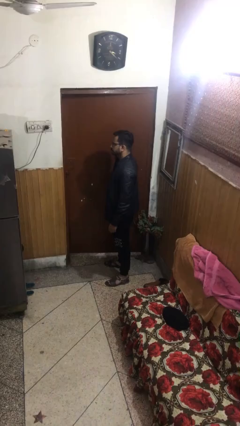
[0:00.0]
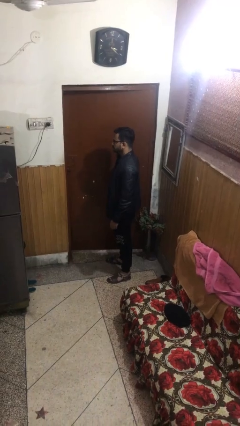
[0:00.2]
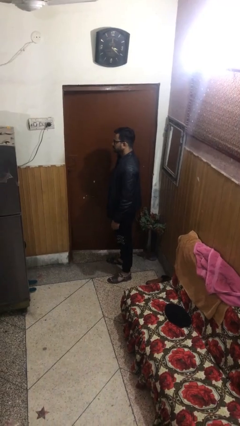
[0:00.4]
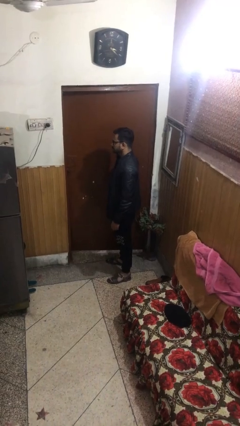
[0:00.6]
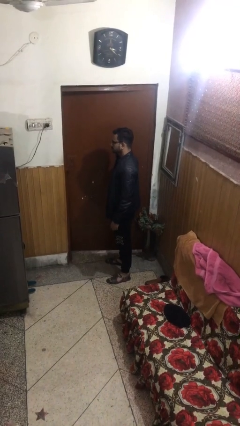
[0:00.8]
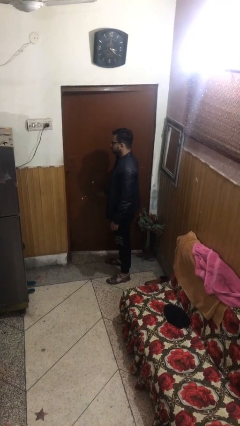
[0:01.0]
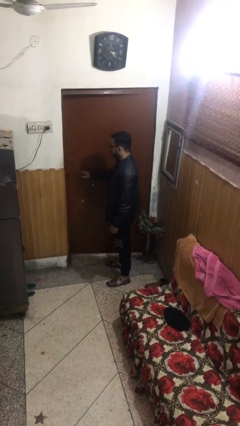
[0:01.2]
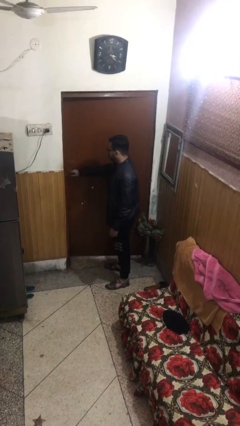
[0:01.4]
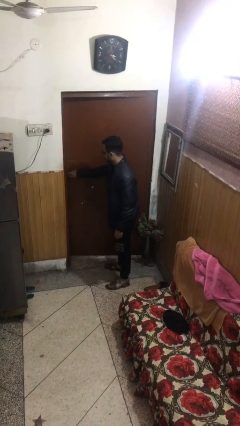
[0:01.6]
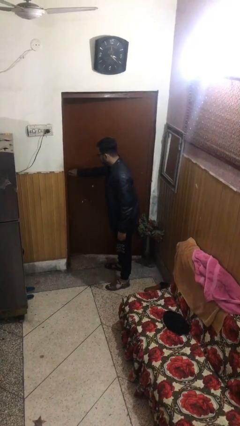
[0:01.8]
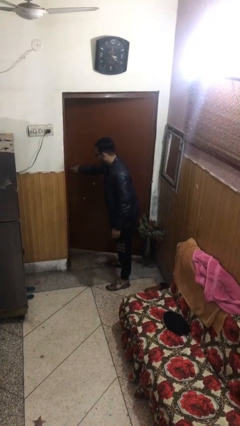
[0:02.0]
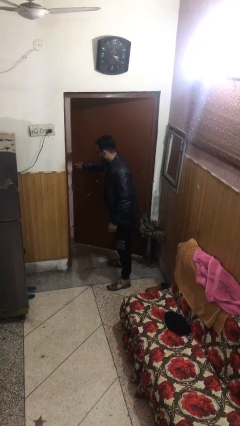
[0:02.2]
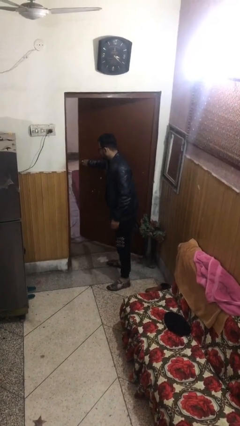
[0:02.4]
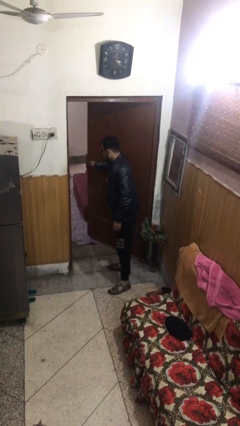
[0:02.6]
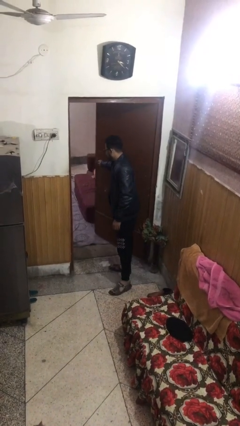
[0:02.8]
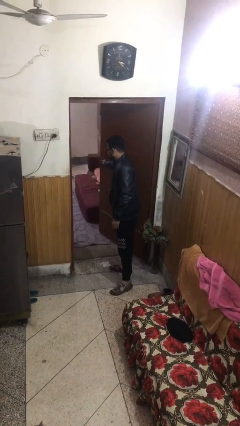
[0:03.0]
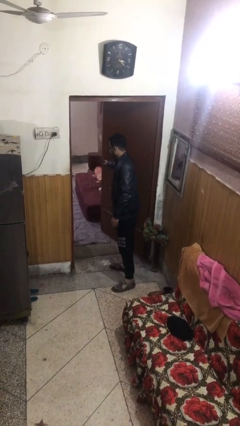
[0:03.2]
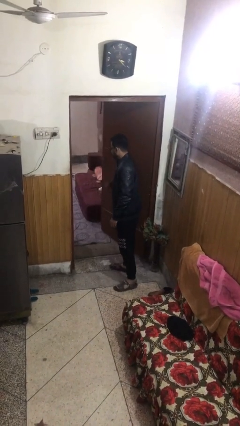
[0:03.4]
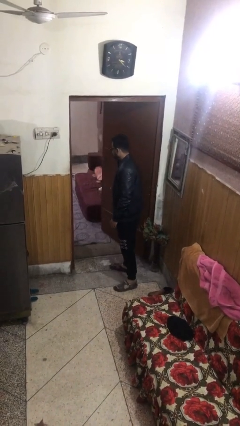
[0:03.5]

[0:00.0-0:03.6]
person opens facility door

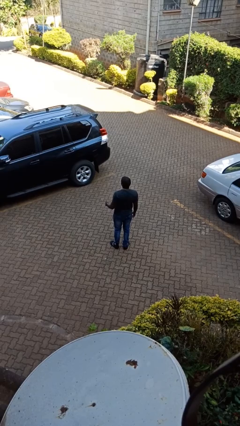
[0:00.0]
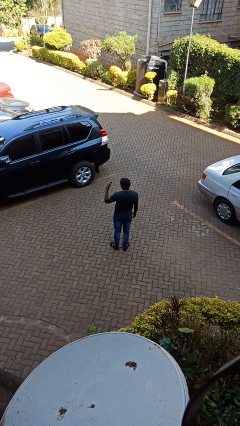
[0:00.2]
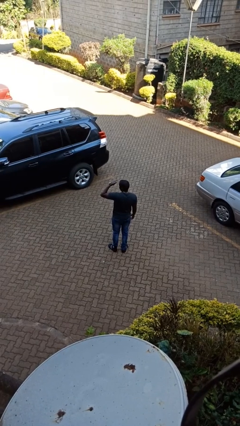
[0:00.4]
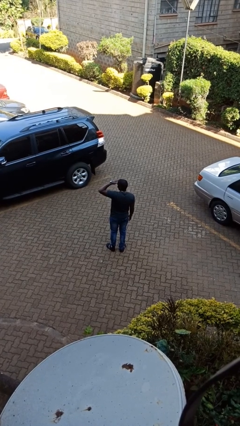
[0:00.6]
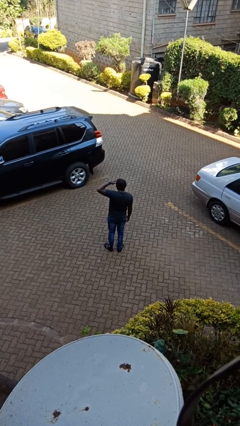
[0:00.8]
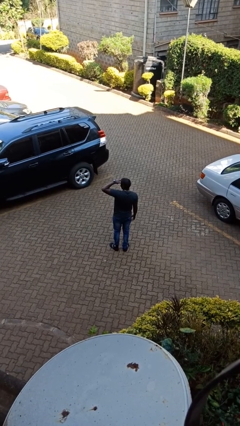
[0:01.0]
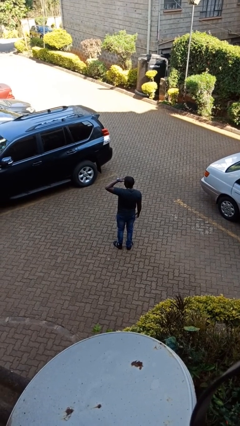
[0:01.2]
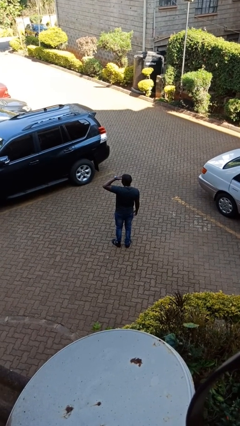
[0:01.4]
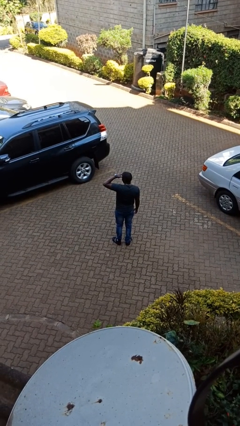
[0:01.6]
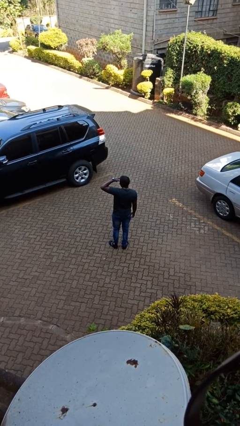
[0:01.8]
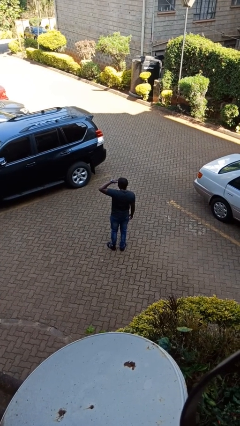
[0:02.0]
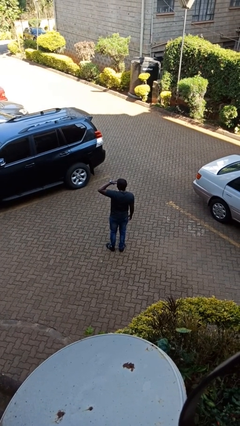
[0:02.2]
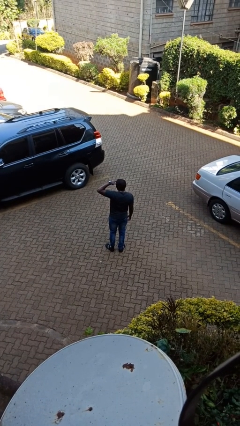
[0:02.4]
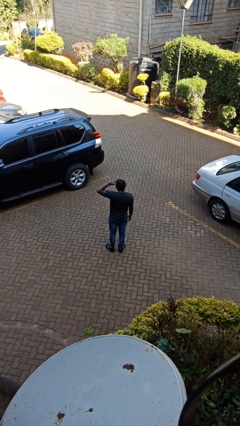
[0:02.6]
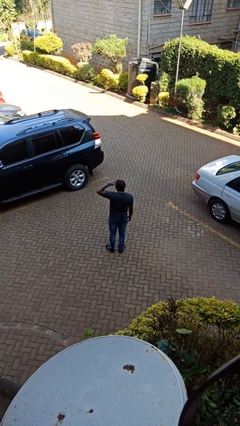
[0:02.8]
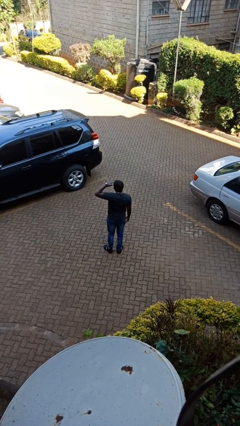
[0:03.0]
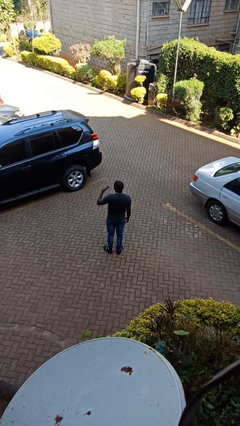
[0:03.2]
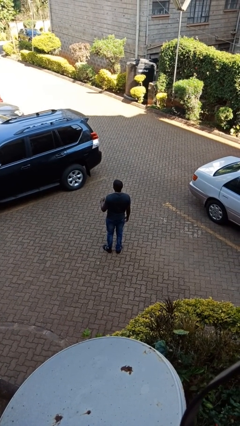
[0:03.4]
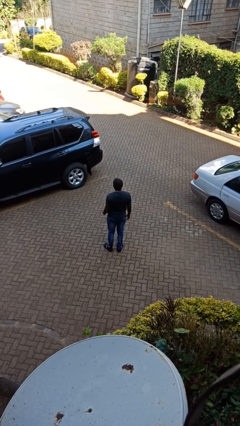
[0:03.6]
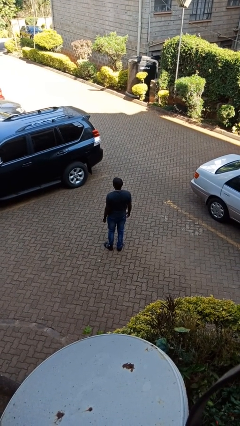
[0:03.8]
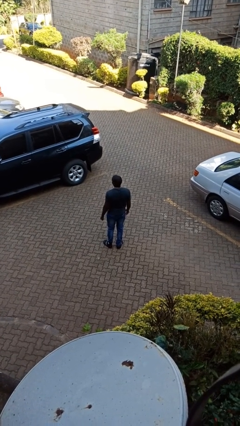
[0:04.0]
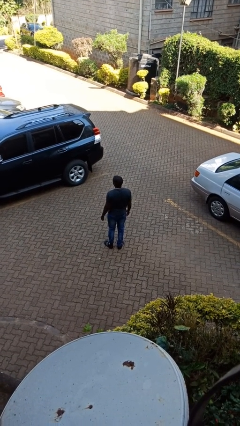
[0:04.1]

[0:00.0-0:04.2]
person shades eyes

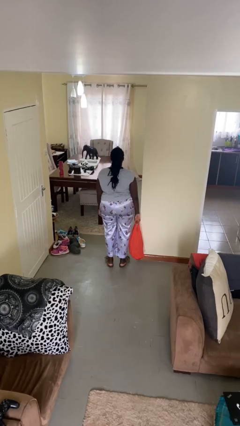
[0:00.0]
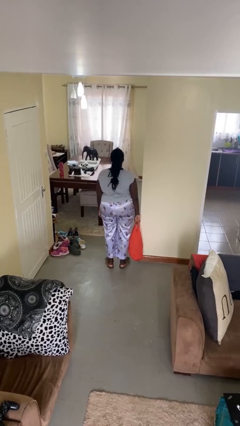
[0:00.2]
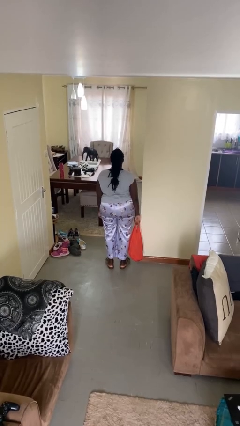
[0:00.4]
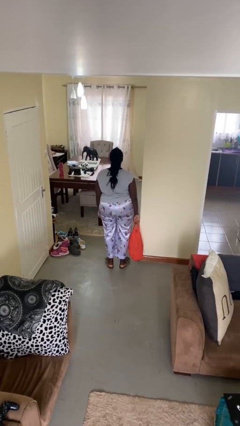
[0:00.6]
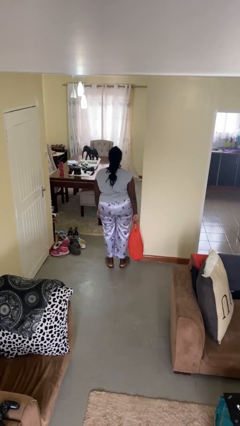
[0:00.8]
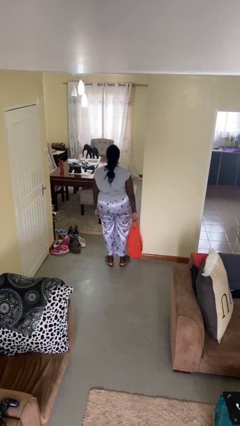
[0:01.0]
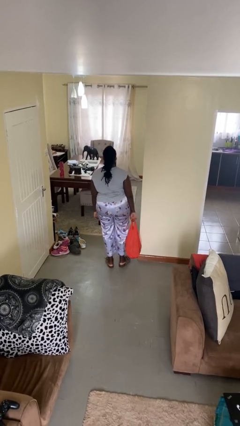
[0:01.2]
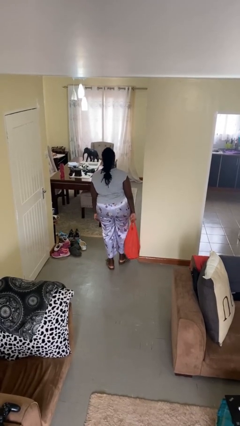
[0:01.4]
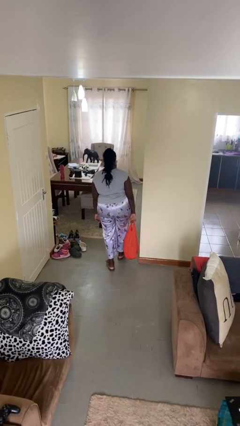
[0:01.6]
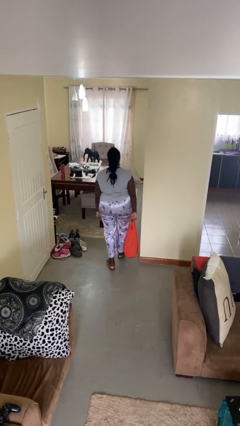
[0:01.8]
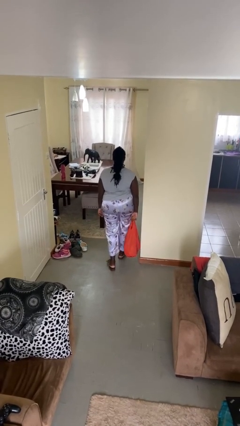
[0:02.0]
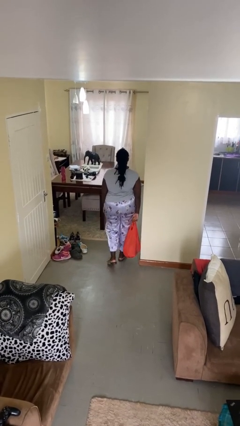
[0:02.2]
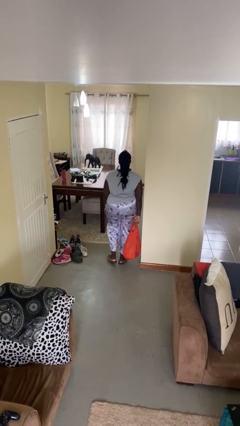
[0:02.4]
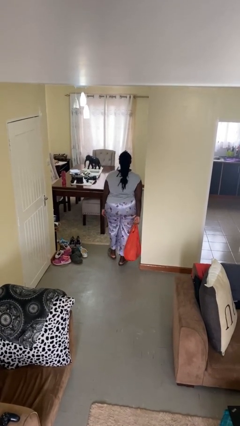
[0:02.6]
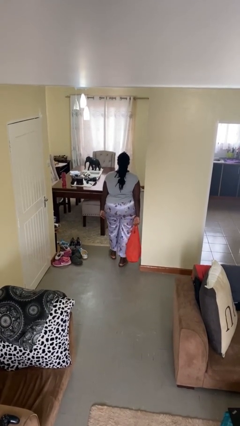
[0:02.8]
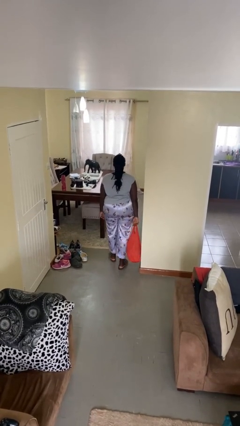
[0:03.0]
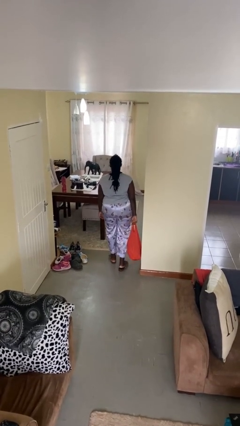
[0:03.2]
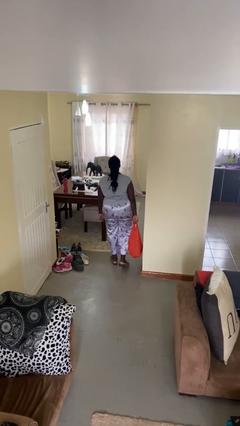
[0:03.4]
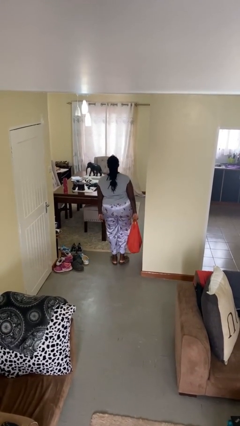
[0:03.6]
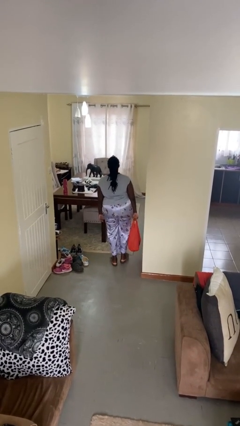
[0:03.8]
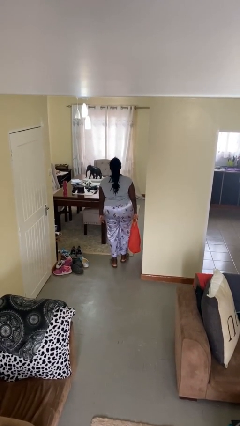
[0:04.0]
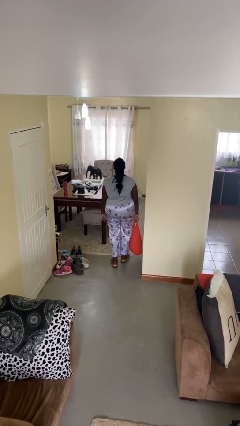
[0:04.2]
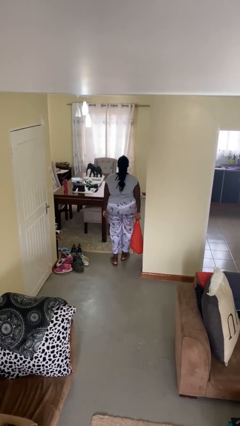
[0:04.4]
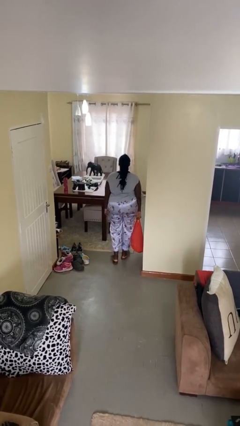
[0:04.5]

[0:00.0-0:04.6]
person carries groceries

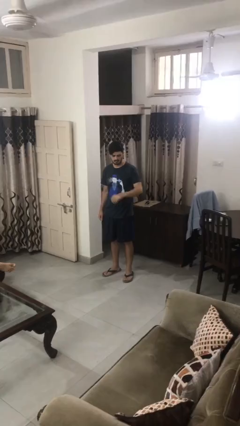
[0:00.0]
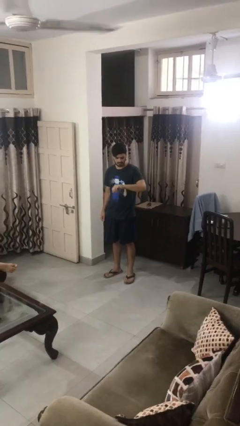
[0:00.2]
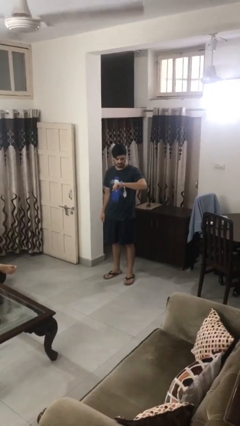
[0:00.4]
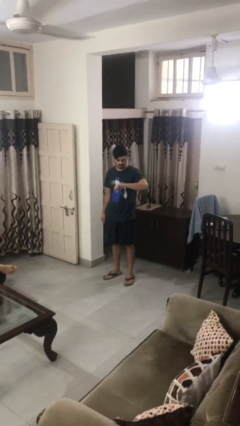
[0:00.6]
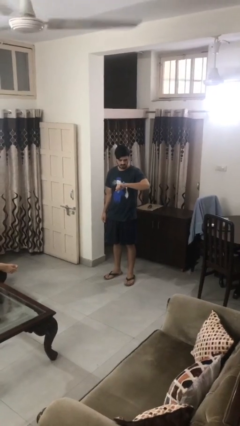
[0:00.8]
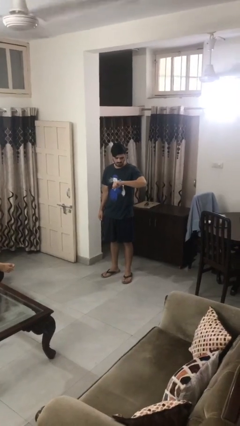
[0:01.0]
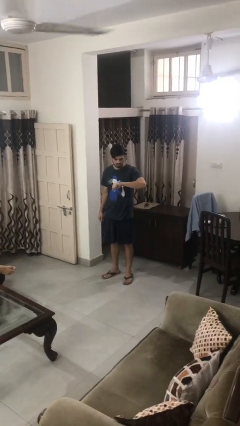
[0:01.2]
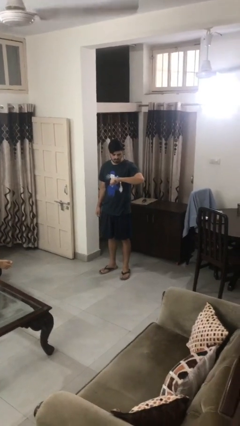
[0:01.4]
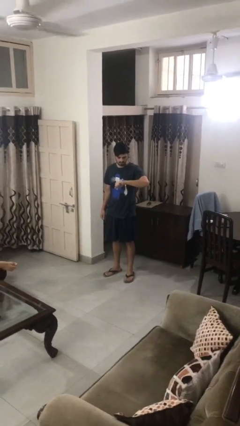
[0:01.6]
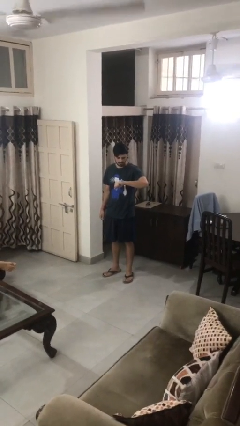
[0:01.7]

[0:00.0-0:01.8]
person looks at wristwatch

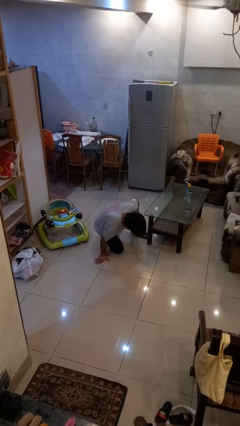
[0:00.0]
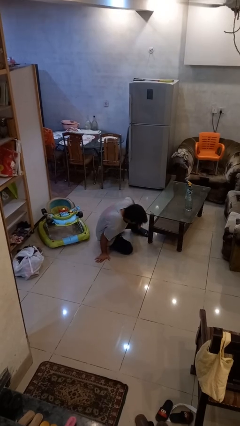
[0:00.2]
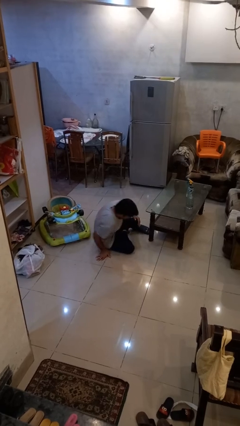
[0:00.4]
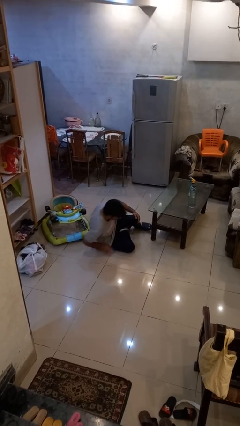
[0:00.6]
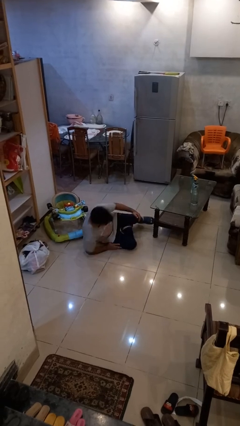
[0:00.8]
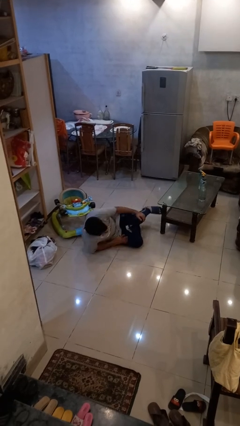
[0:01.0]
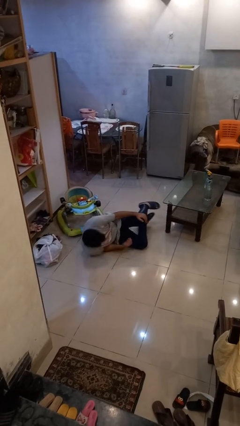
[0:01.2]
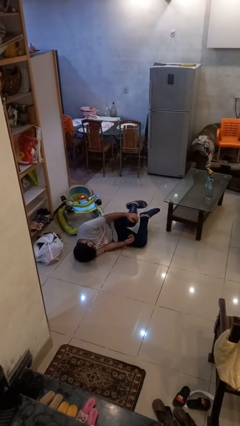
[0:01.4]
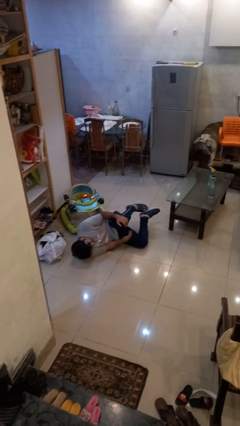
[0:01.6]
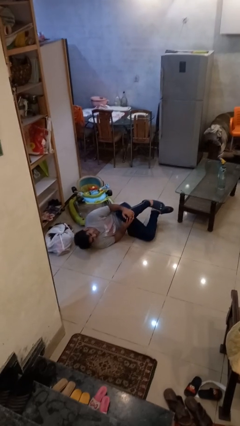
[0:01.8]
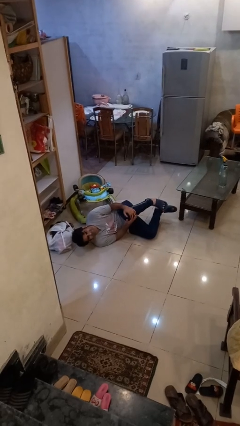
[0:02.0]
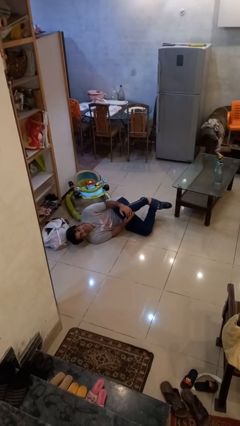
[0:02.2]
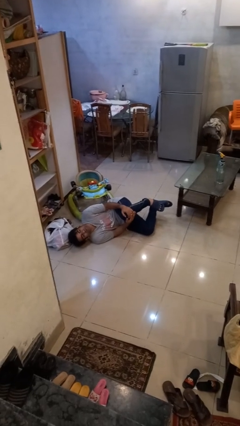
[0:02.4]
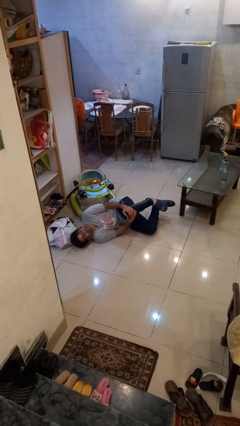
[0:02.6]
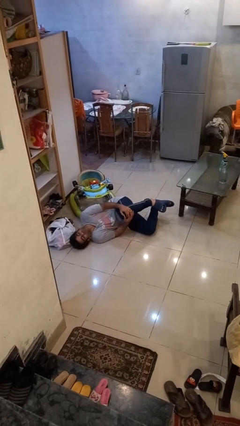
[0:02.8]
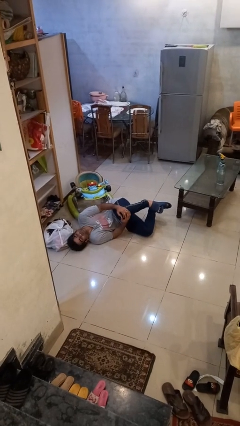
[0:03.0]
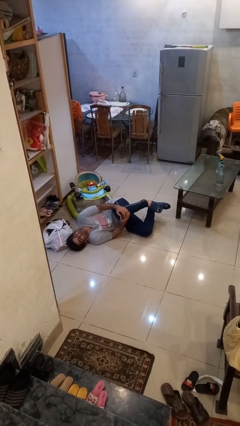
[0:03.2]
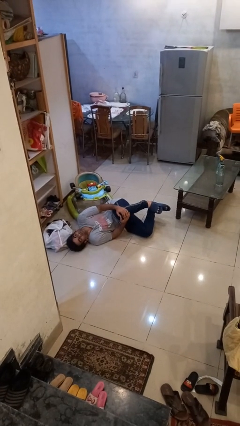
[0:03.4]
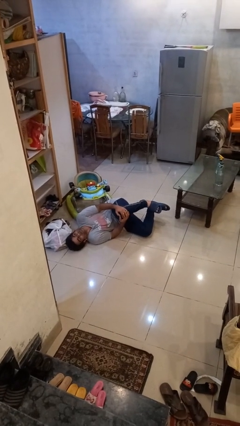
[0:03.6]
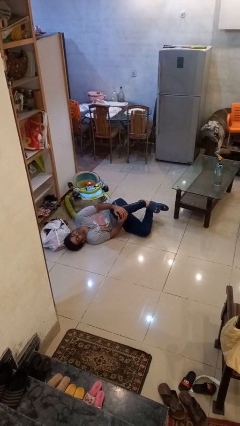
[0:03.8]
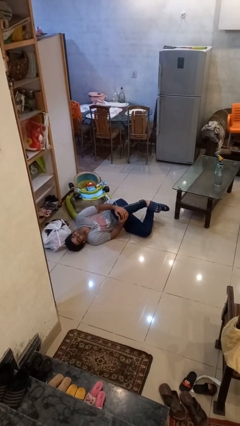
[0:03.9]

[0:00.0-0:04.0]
person lies down on floor
